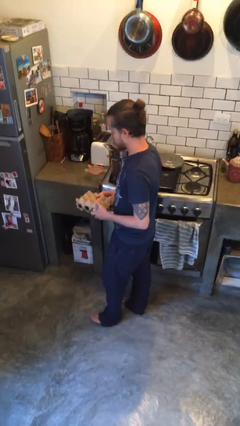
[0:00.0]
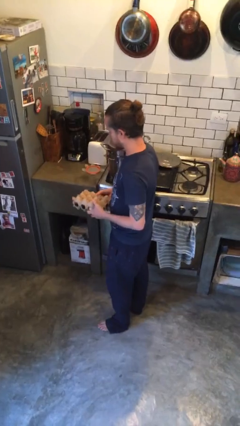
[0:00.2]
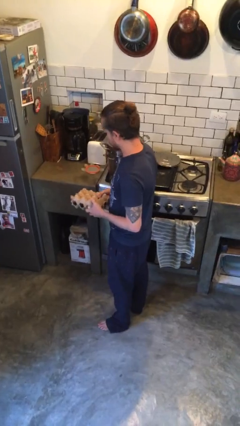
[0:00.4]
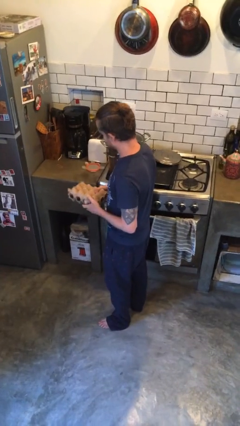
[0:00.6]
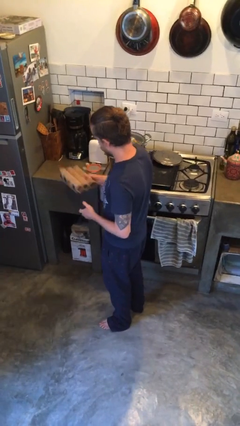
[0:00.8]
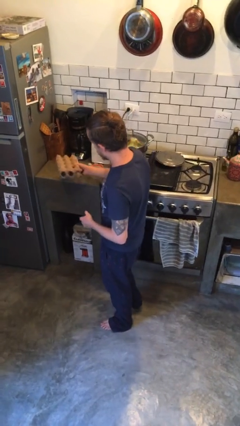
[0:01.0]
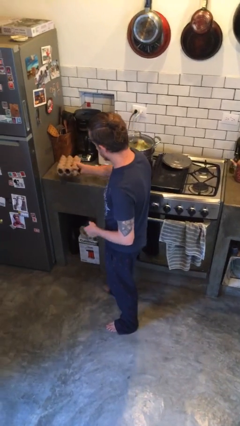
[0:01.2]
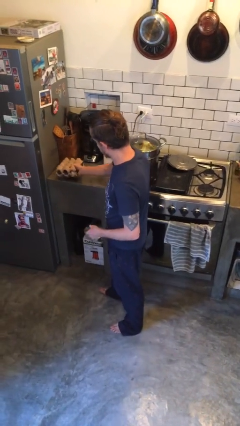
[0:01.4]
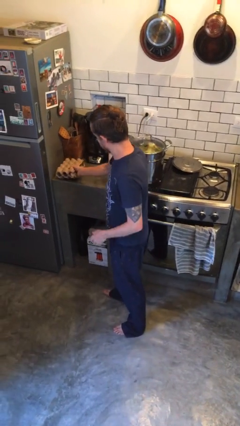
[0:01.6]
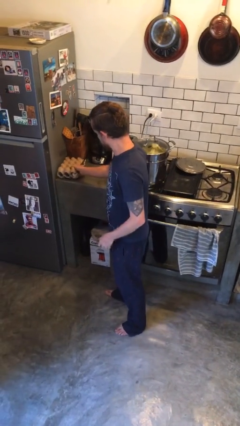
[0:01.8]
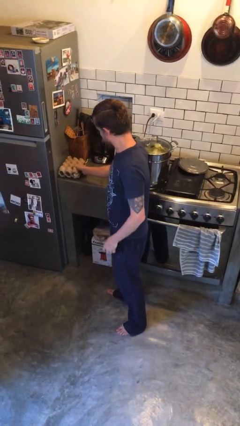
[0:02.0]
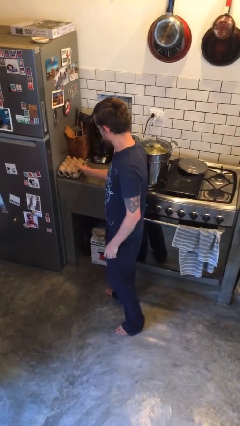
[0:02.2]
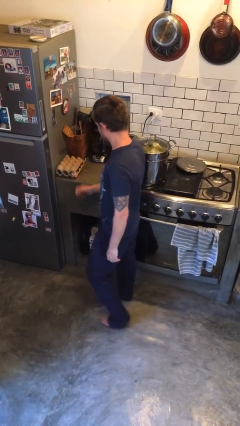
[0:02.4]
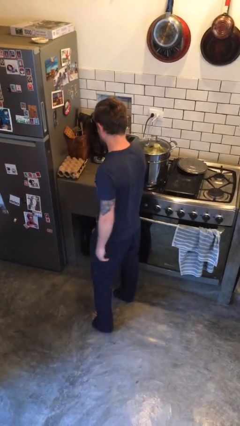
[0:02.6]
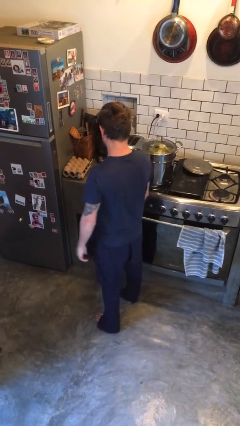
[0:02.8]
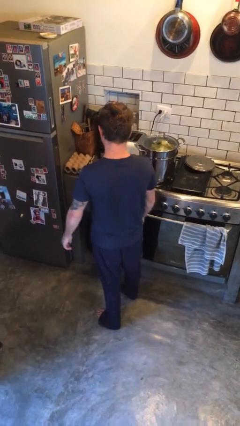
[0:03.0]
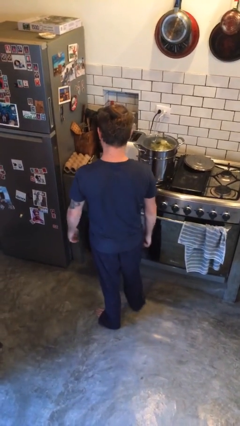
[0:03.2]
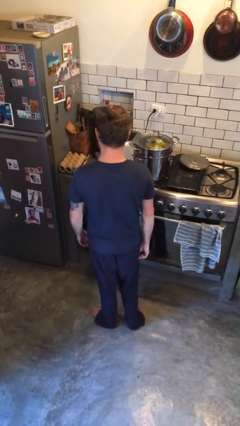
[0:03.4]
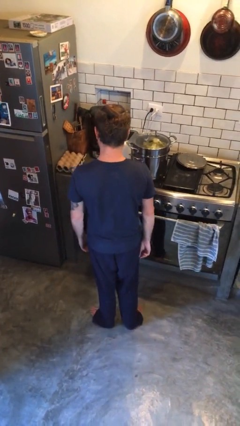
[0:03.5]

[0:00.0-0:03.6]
person puts down object on countertop

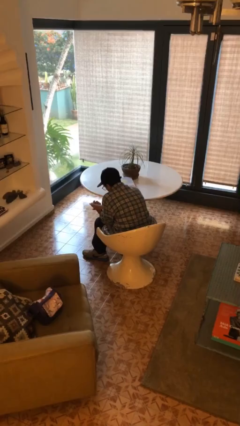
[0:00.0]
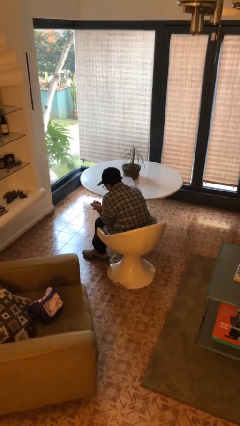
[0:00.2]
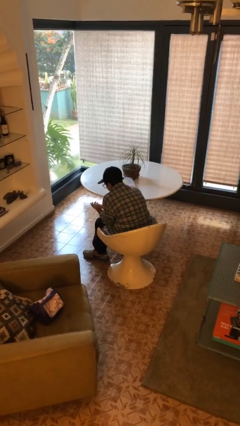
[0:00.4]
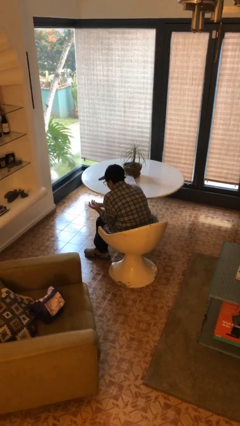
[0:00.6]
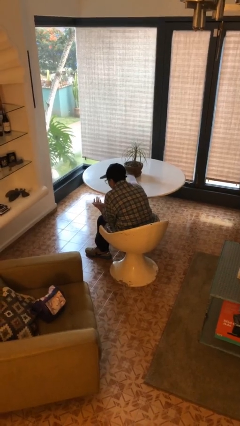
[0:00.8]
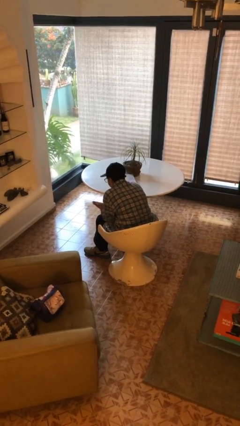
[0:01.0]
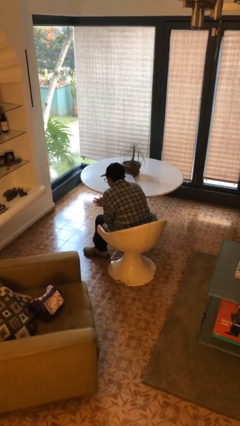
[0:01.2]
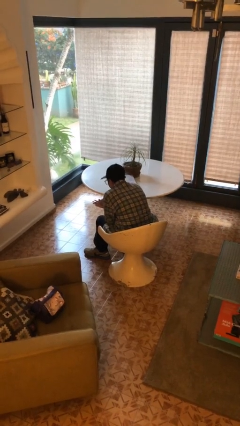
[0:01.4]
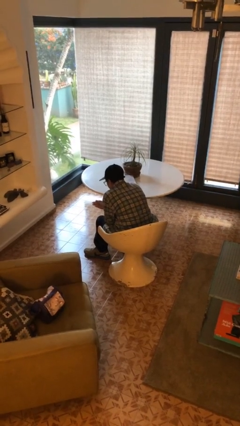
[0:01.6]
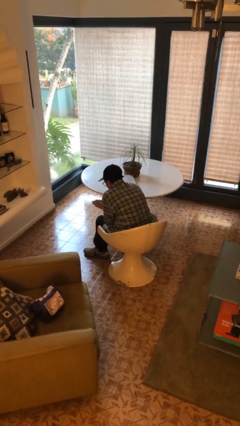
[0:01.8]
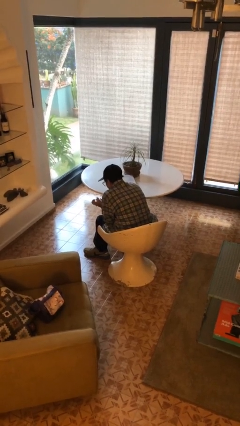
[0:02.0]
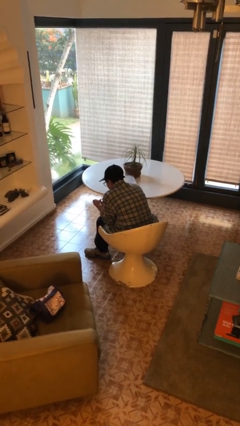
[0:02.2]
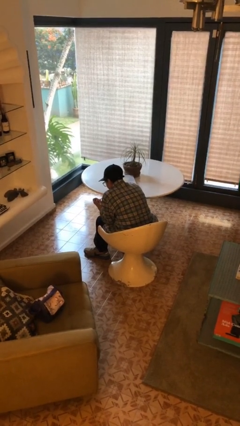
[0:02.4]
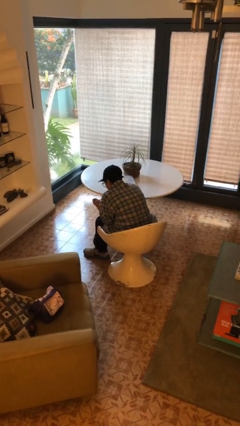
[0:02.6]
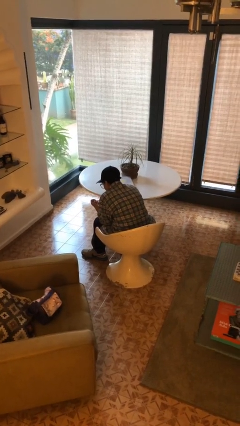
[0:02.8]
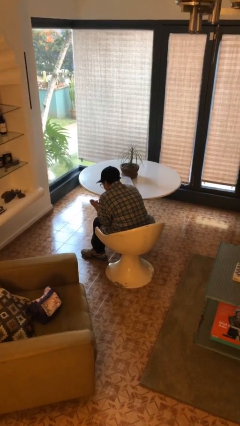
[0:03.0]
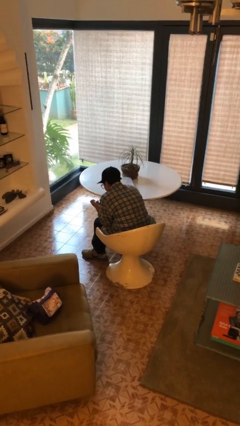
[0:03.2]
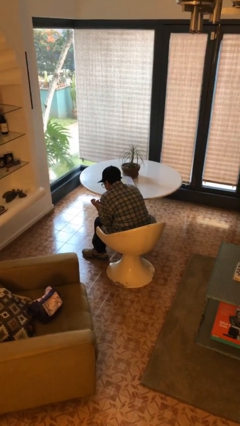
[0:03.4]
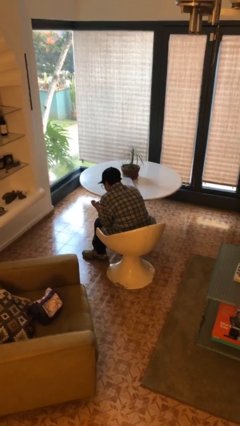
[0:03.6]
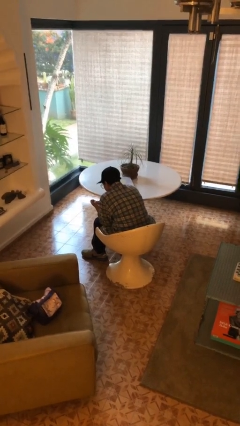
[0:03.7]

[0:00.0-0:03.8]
person looks at hands in lap

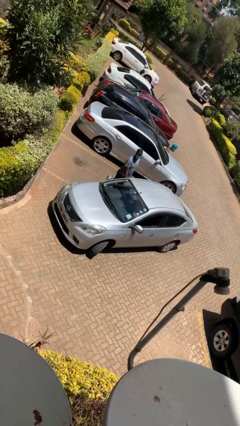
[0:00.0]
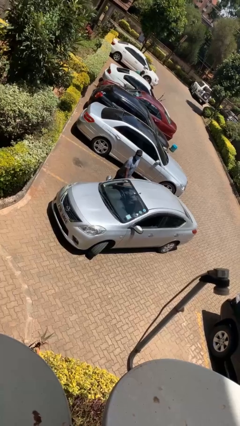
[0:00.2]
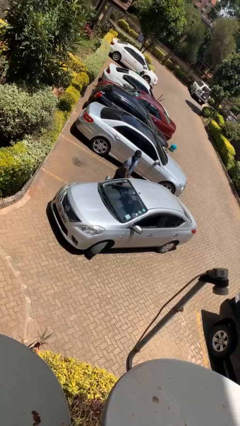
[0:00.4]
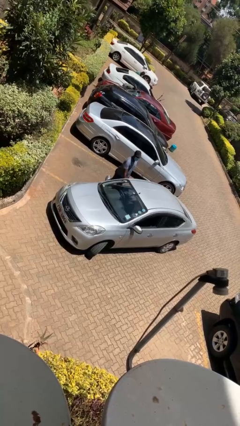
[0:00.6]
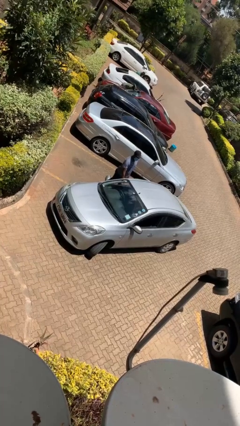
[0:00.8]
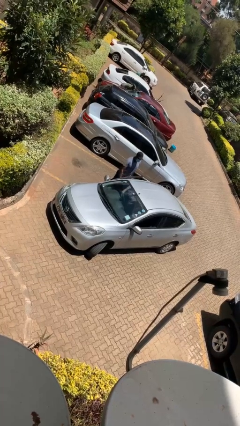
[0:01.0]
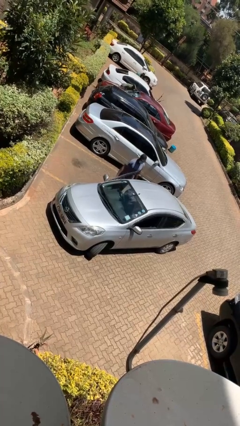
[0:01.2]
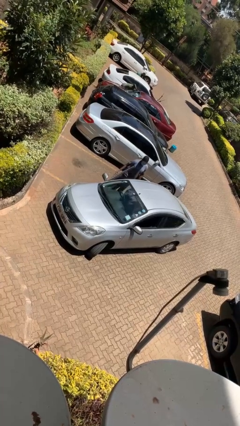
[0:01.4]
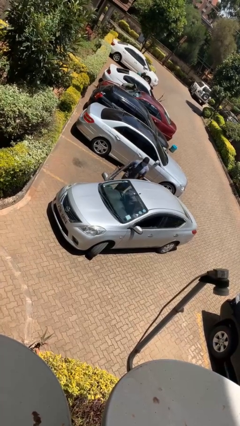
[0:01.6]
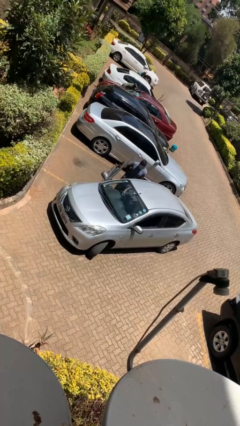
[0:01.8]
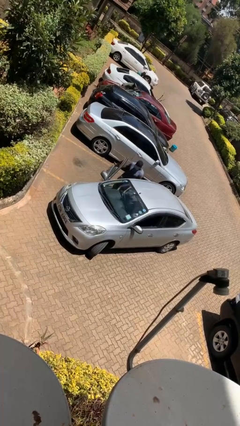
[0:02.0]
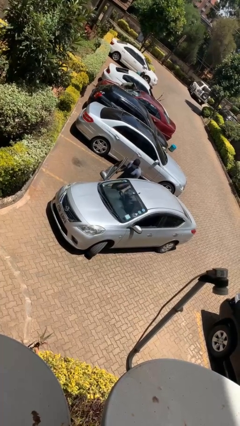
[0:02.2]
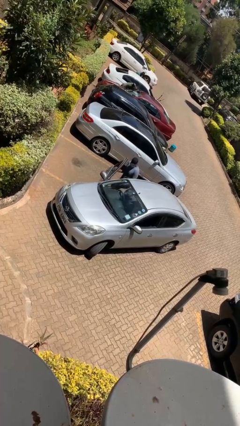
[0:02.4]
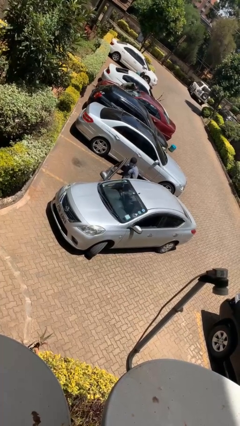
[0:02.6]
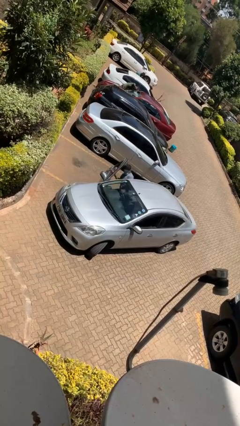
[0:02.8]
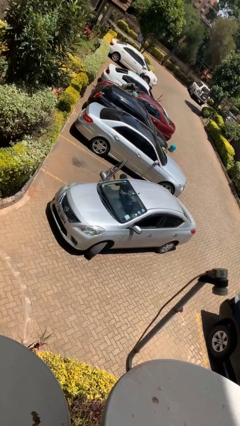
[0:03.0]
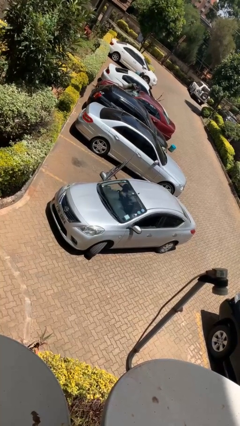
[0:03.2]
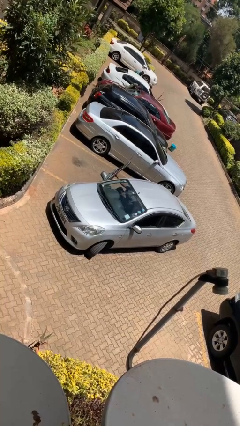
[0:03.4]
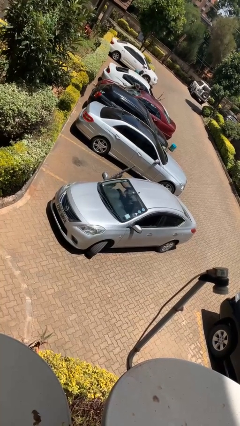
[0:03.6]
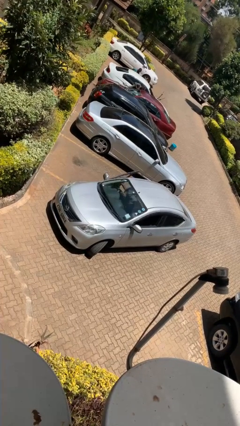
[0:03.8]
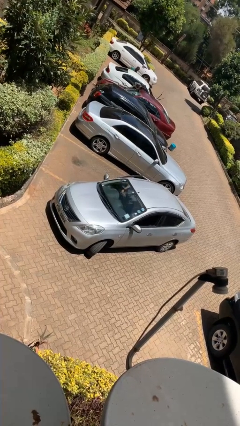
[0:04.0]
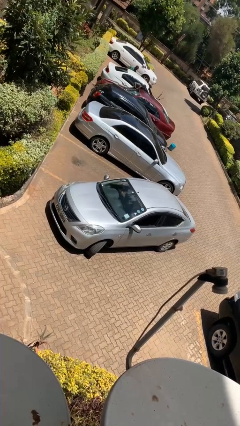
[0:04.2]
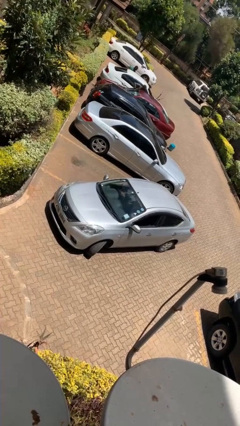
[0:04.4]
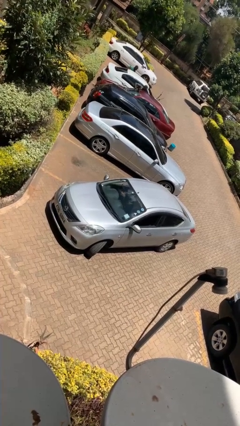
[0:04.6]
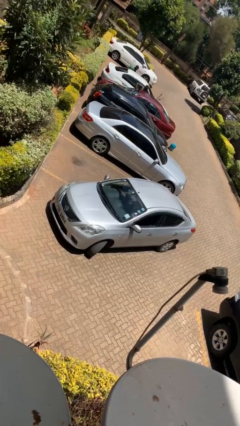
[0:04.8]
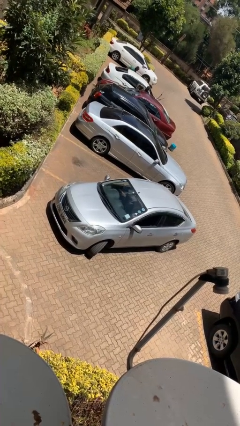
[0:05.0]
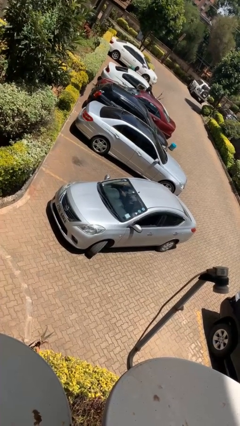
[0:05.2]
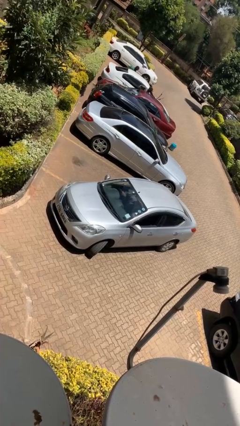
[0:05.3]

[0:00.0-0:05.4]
car picks up person

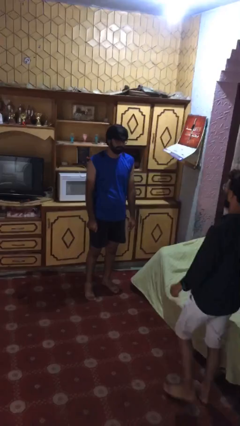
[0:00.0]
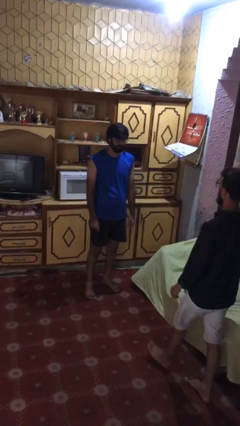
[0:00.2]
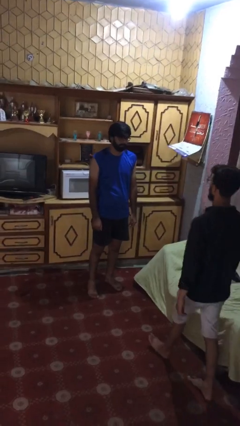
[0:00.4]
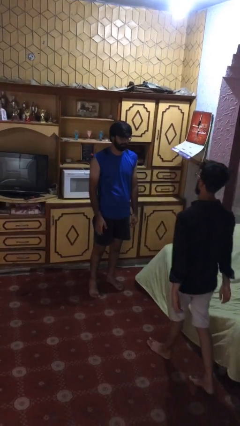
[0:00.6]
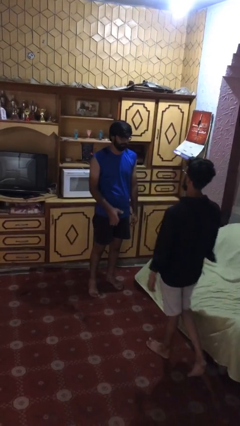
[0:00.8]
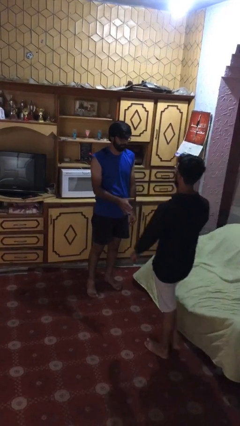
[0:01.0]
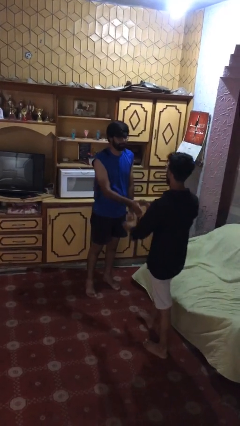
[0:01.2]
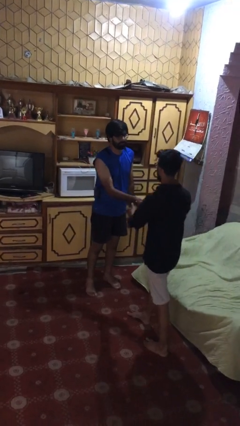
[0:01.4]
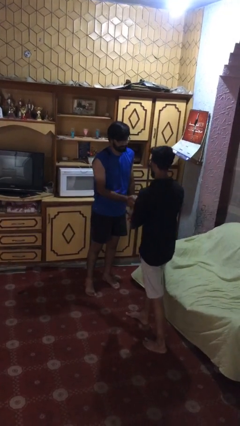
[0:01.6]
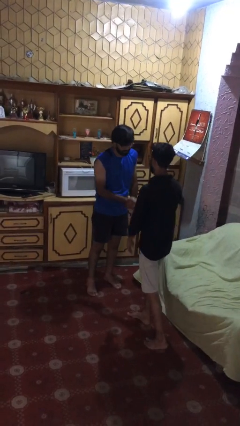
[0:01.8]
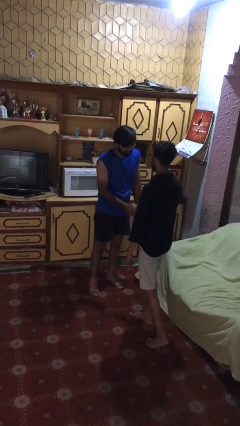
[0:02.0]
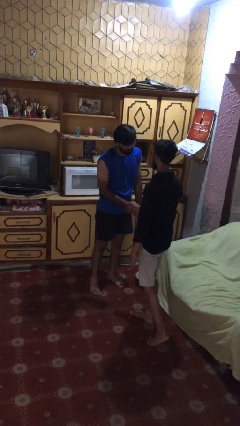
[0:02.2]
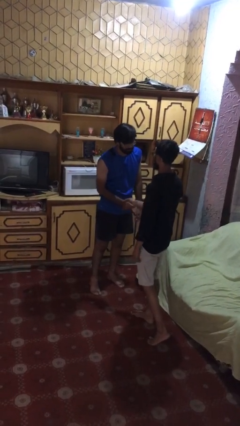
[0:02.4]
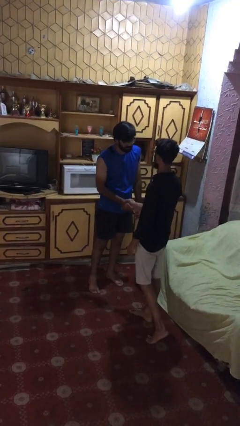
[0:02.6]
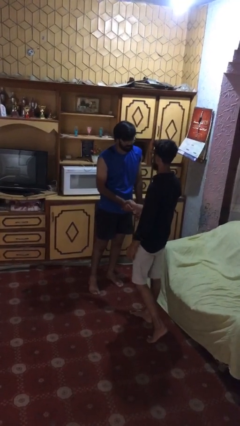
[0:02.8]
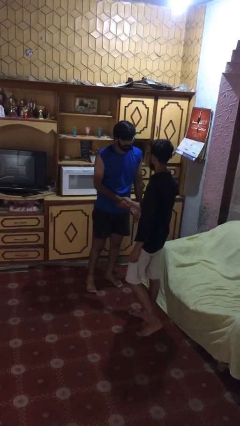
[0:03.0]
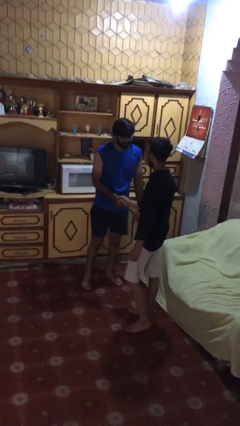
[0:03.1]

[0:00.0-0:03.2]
person shakes hand

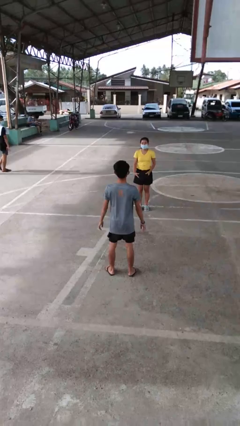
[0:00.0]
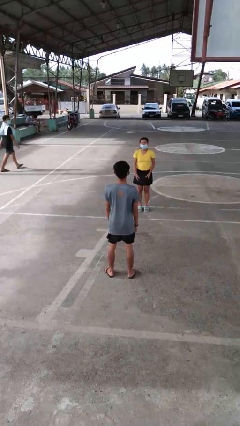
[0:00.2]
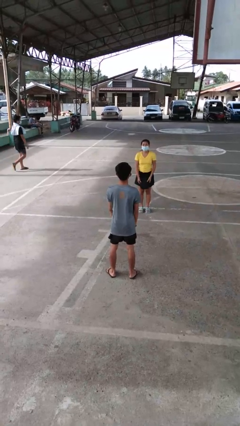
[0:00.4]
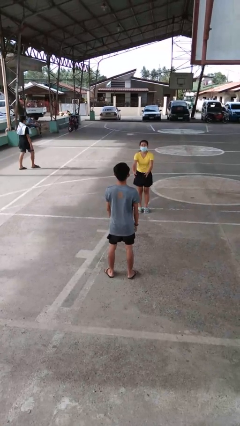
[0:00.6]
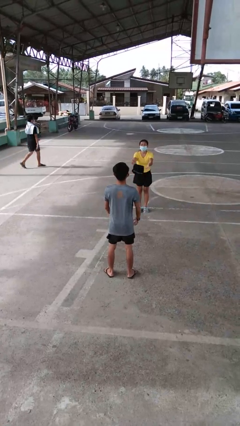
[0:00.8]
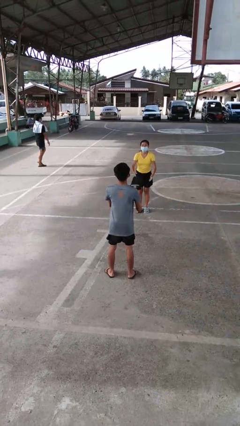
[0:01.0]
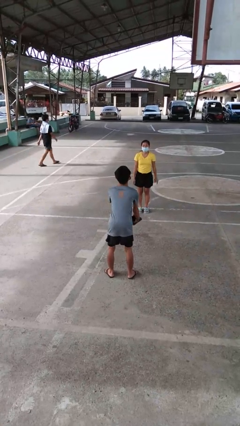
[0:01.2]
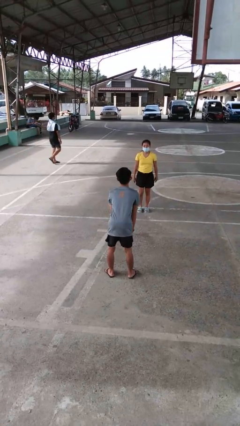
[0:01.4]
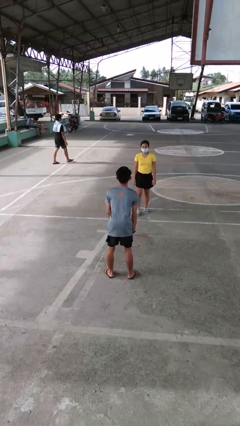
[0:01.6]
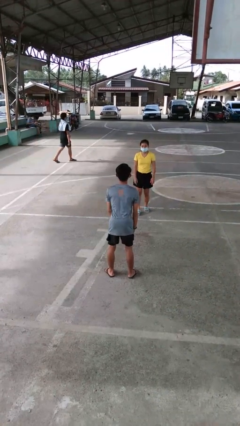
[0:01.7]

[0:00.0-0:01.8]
person catches object from person
